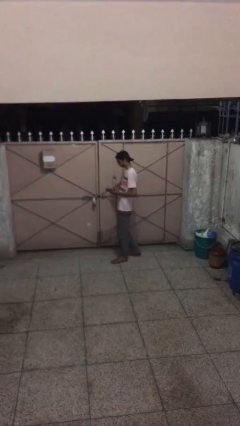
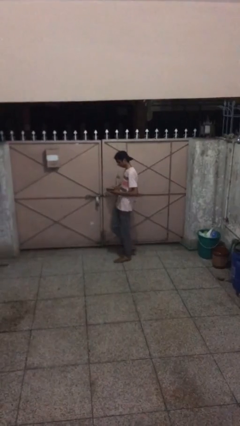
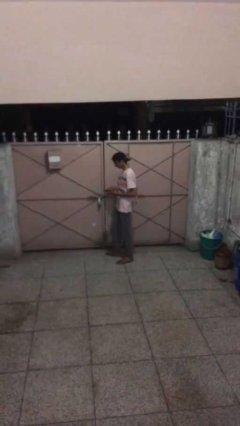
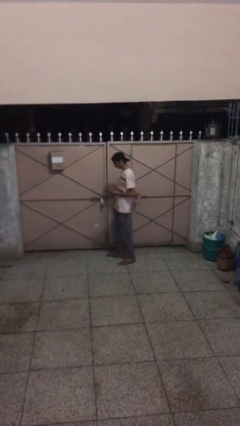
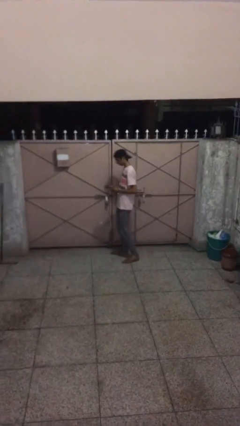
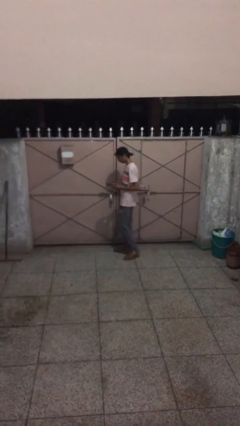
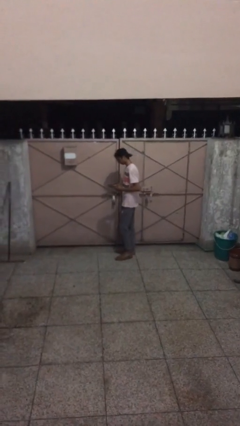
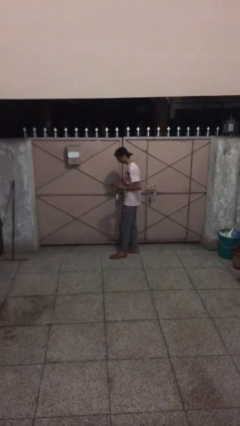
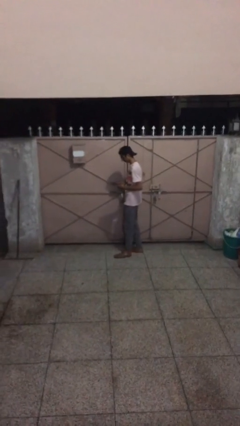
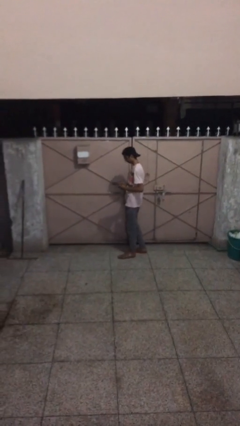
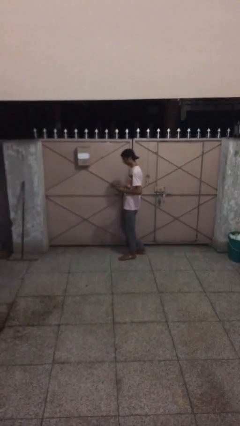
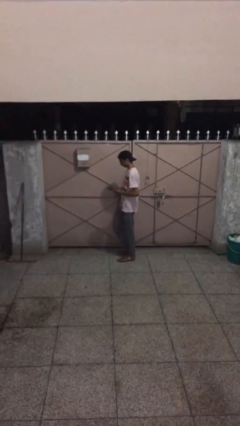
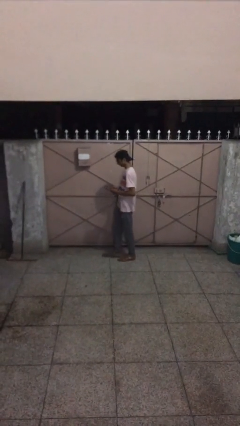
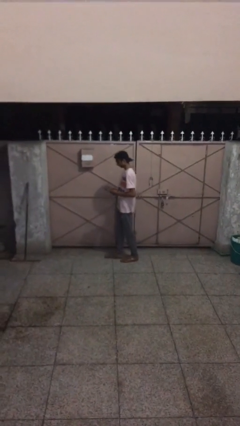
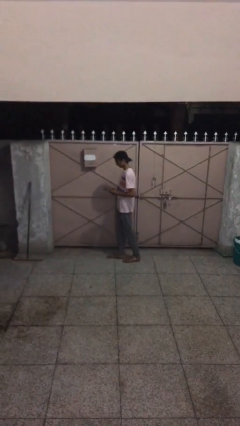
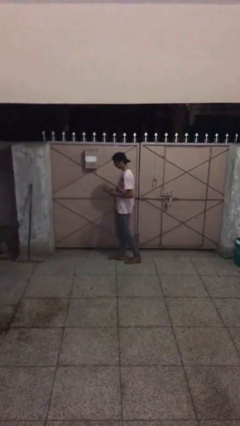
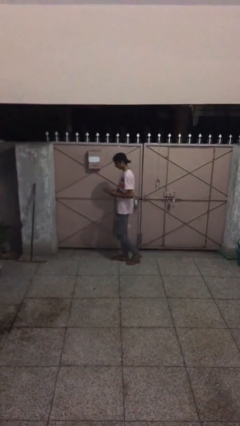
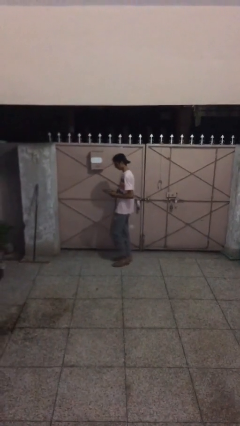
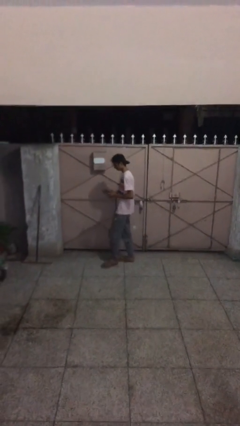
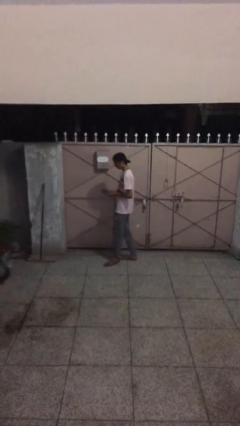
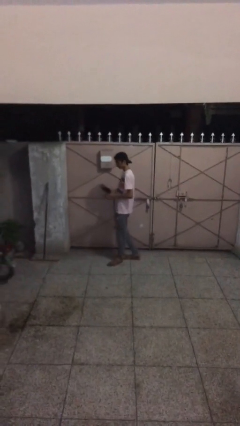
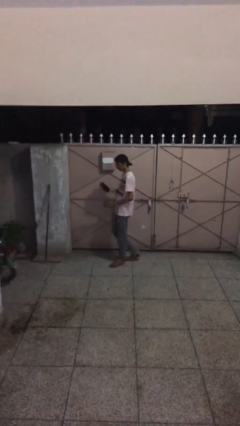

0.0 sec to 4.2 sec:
person texts on phone

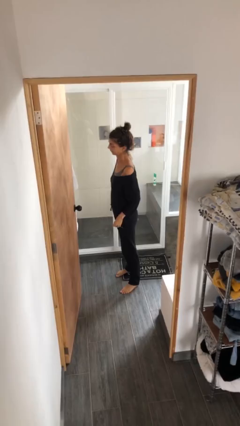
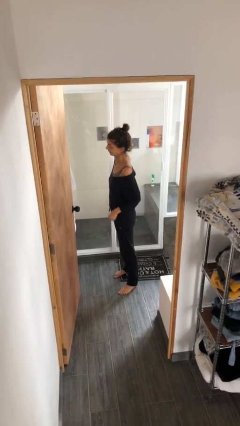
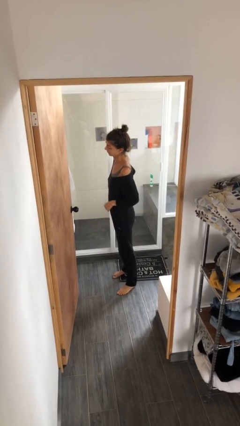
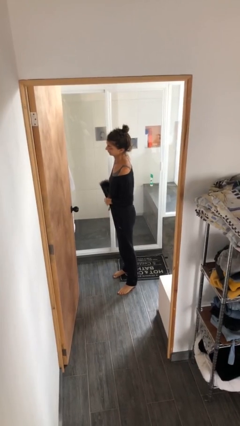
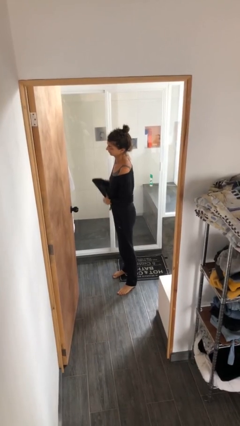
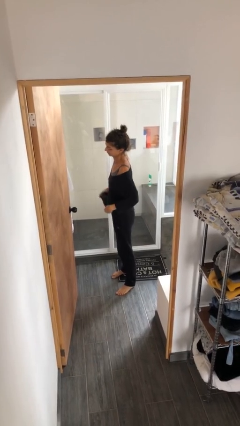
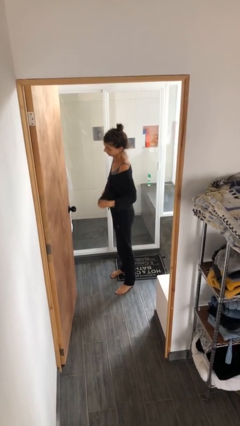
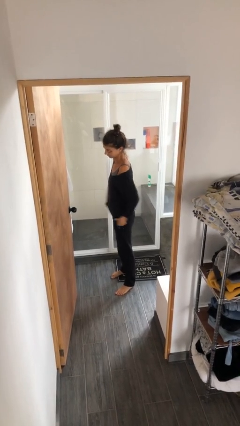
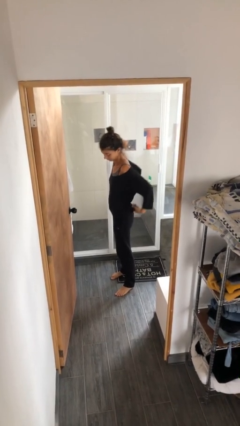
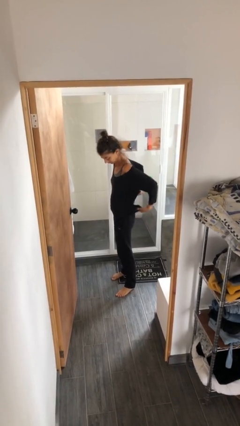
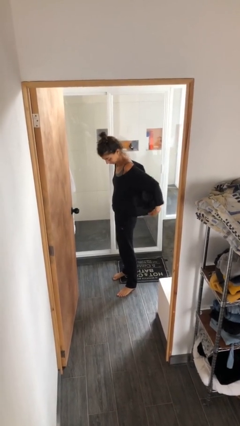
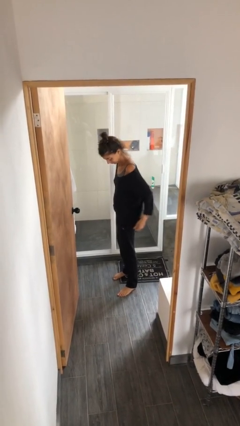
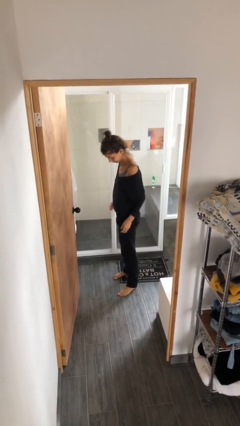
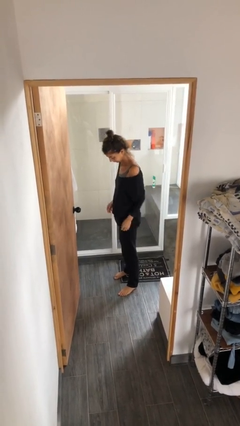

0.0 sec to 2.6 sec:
person untucks shirt

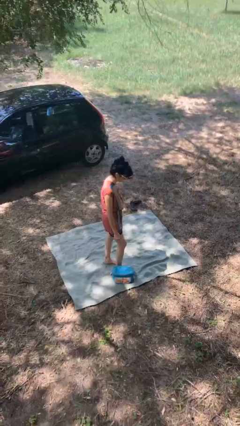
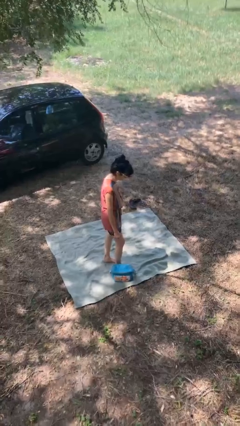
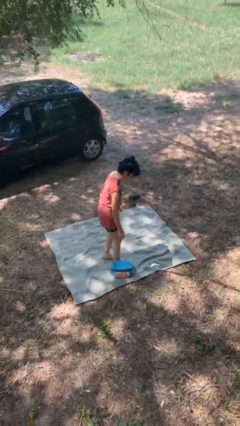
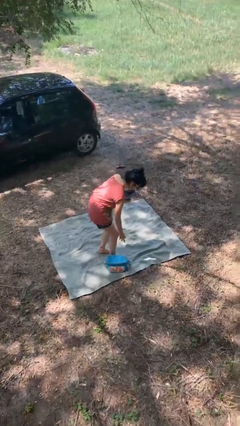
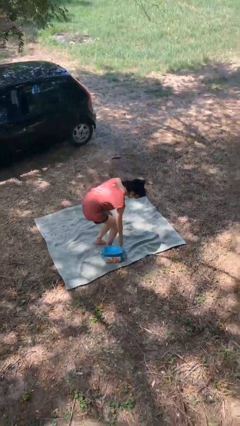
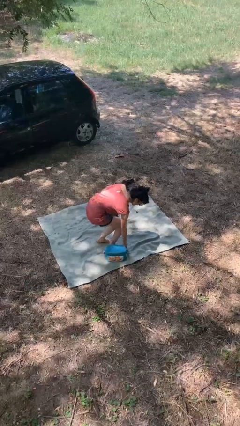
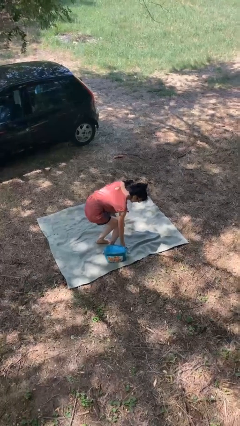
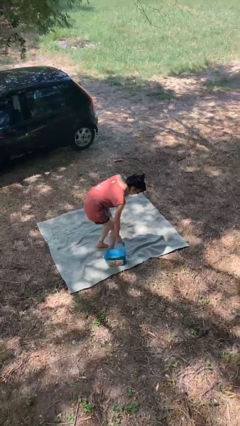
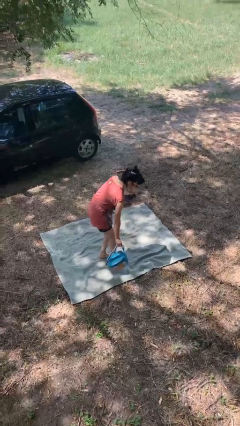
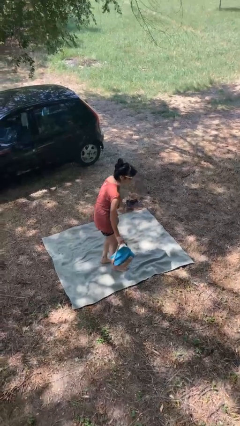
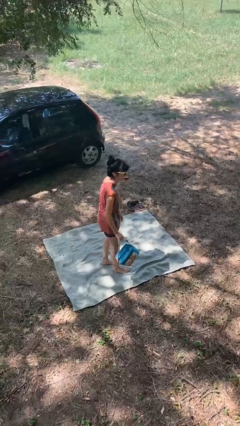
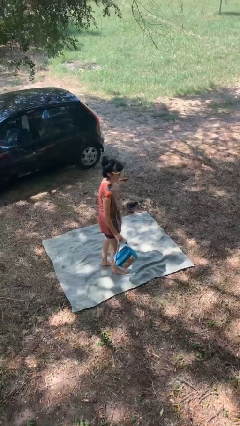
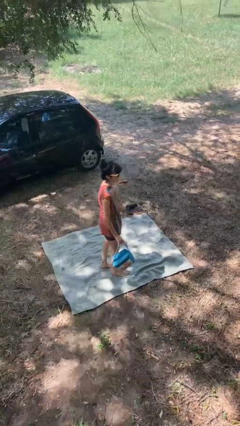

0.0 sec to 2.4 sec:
person picks up object from floor

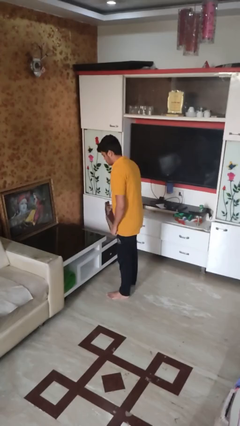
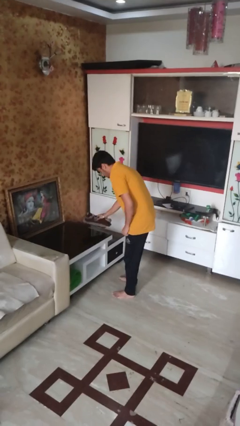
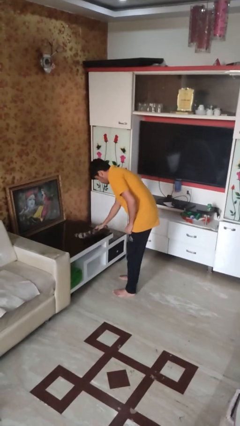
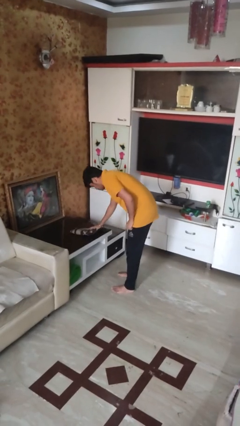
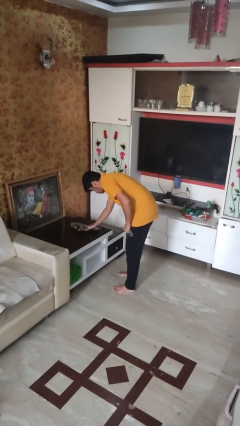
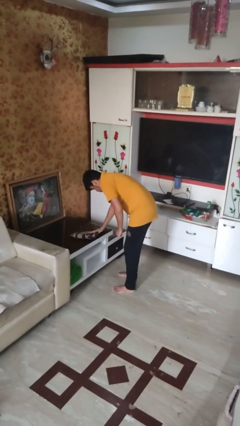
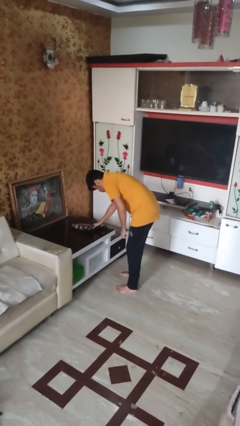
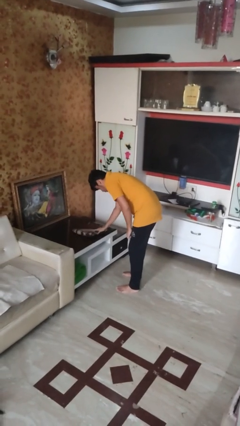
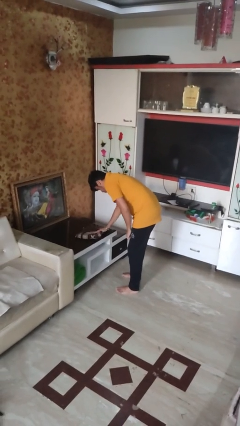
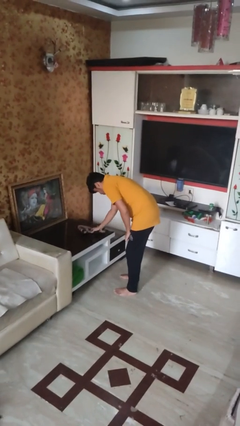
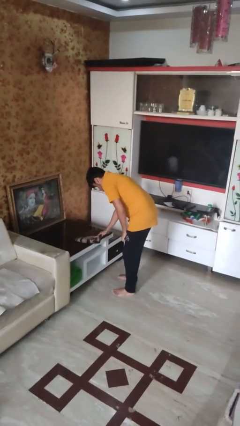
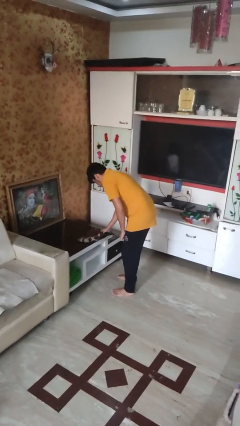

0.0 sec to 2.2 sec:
person cleans table with rag

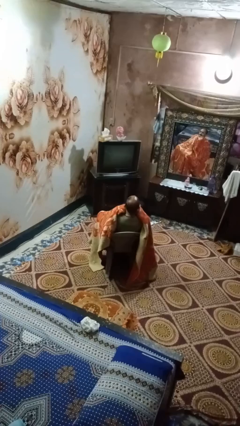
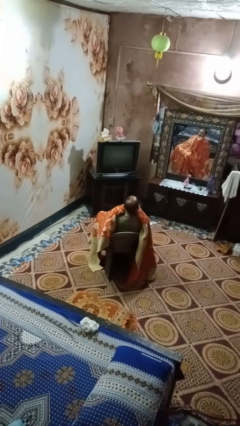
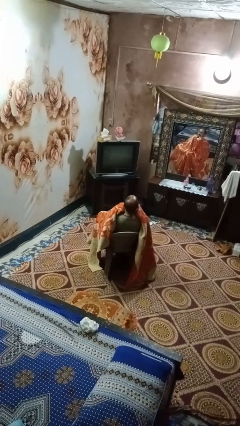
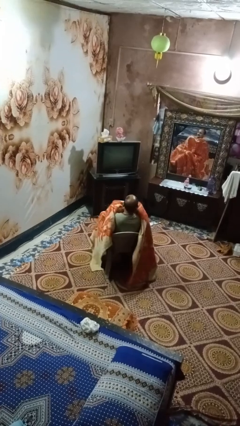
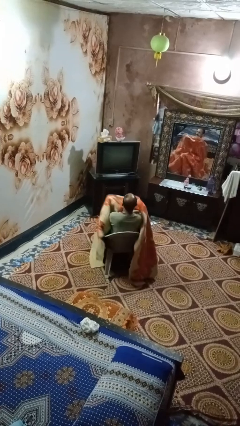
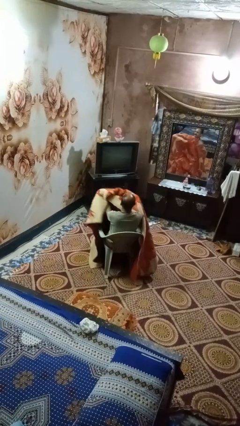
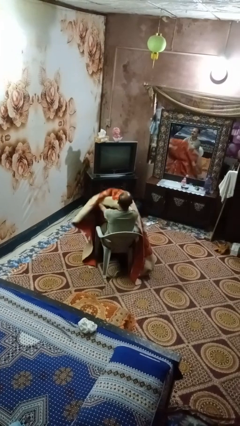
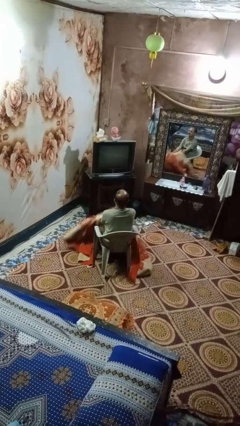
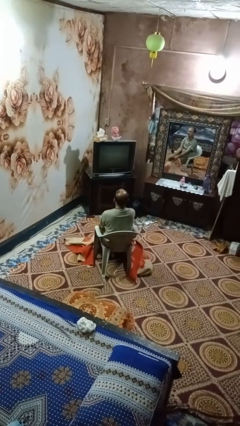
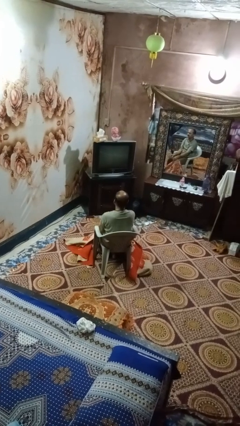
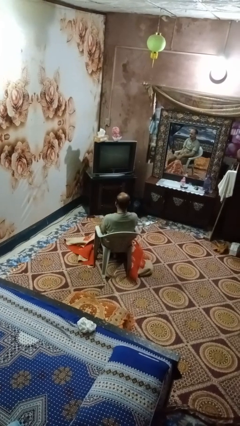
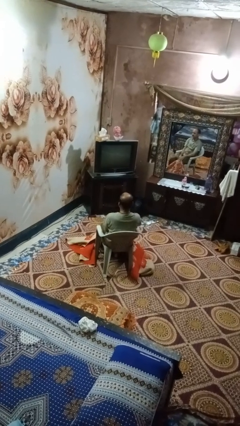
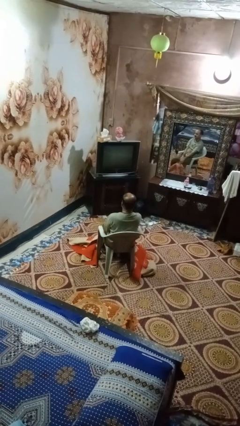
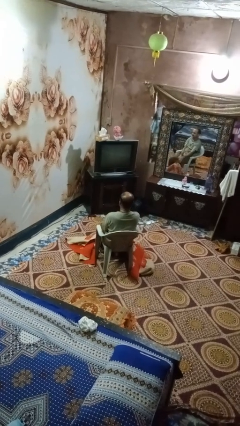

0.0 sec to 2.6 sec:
person uncovers with blanket

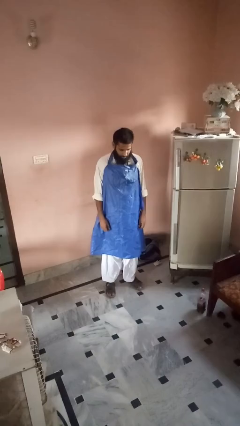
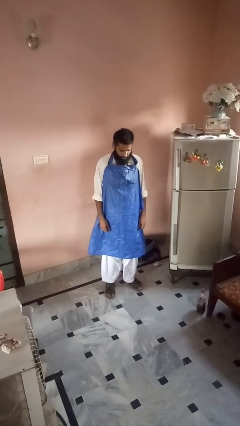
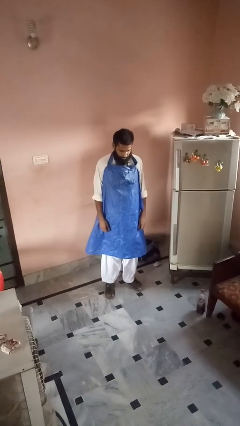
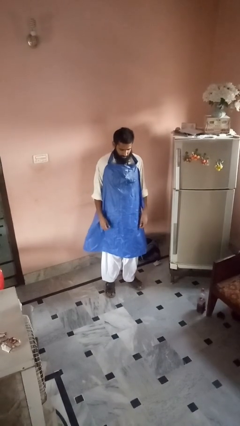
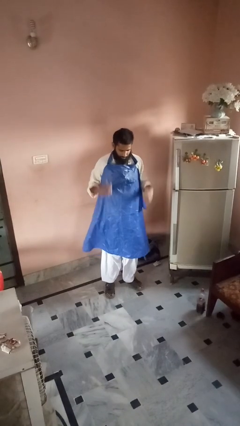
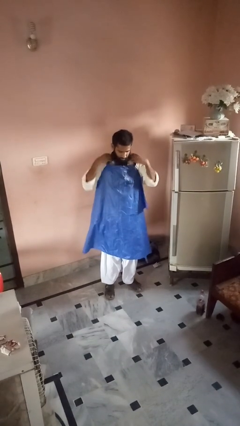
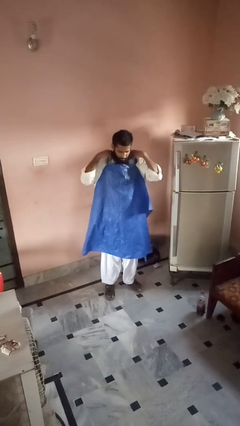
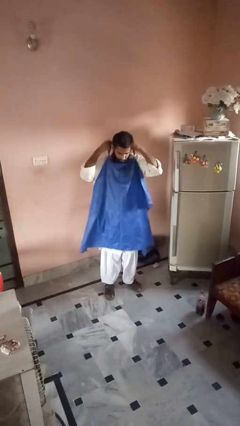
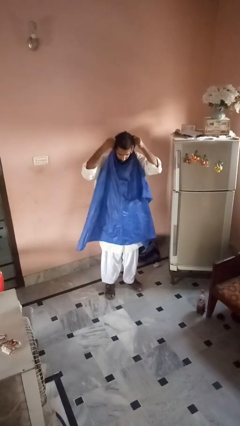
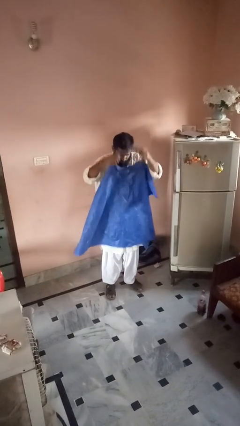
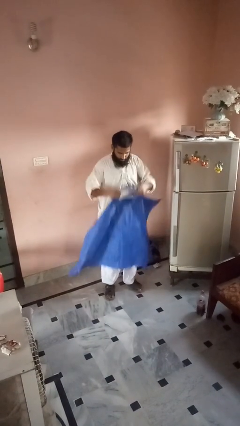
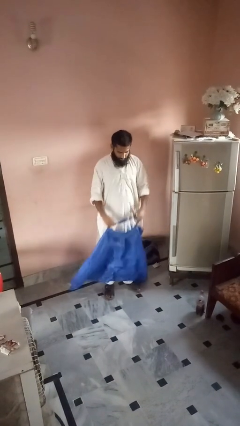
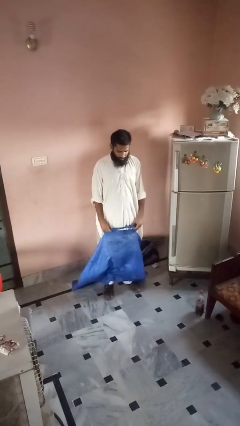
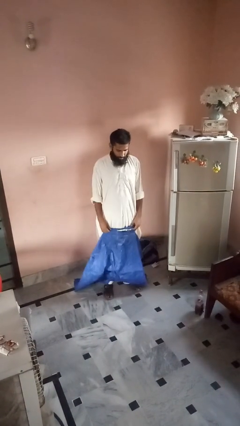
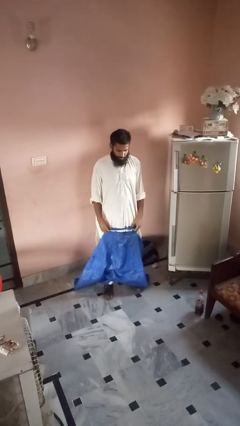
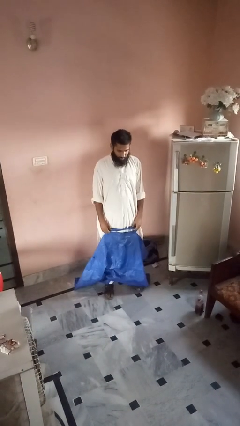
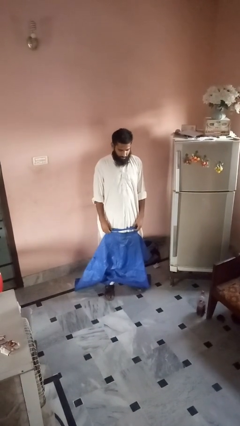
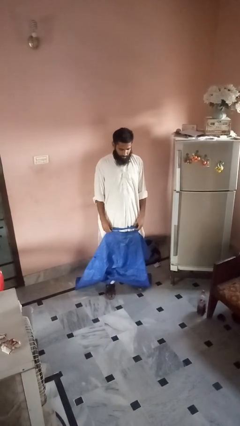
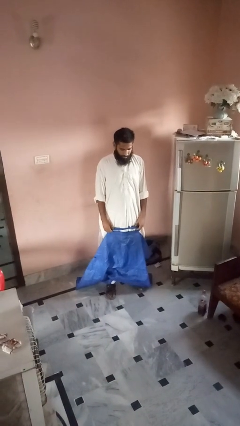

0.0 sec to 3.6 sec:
person takes off apron
